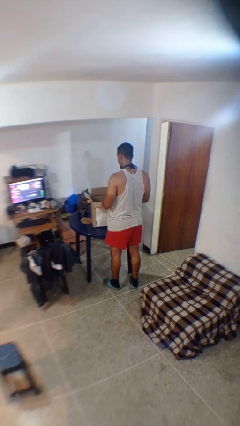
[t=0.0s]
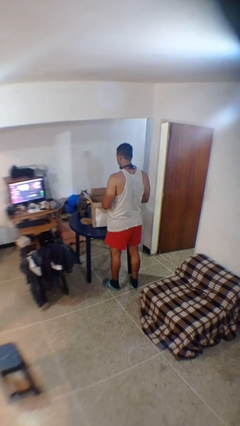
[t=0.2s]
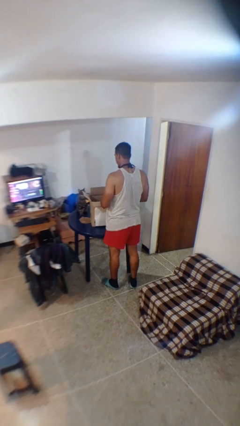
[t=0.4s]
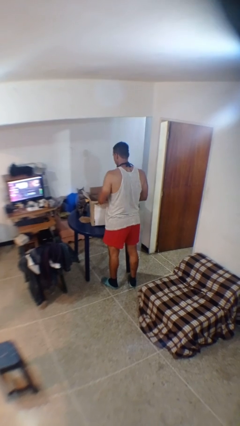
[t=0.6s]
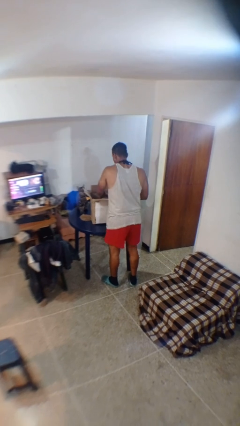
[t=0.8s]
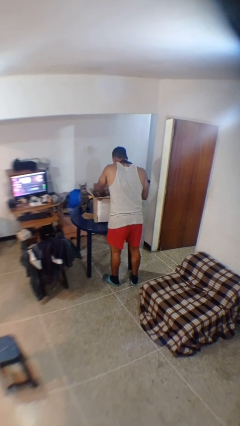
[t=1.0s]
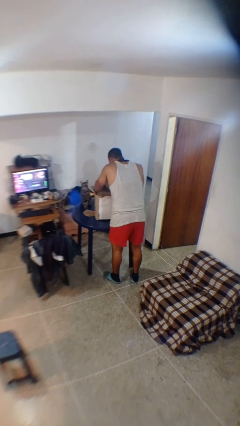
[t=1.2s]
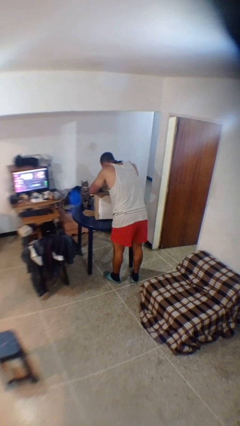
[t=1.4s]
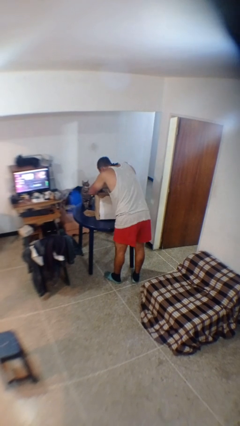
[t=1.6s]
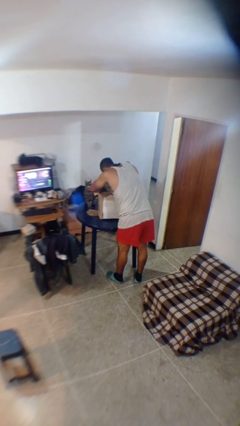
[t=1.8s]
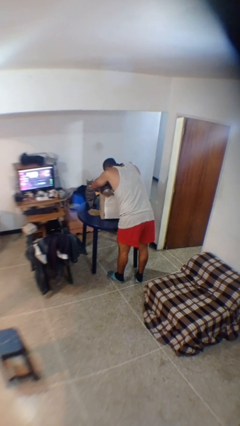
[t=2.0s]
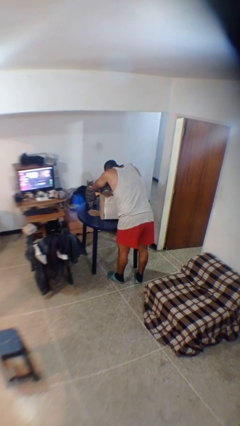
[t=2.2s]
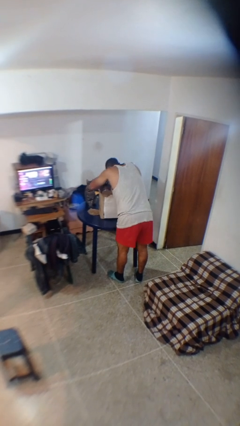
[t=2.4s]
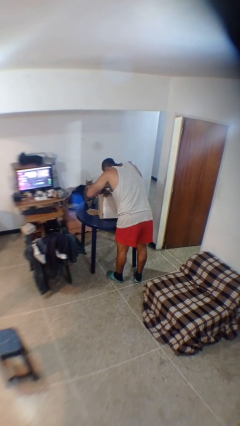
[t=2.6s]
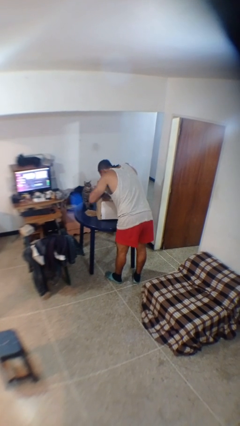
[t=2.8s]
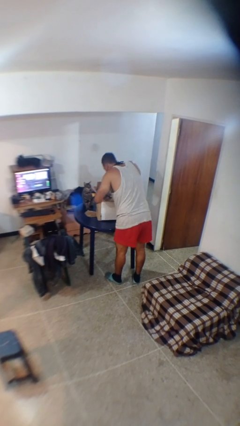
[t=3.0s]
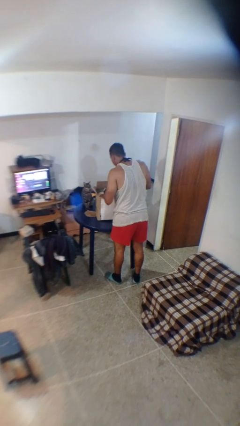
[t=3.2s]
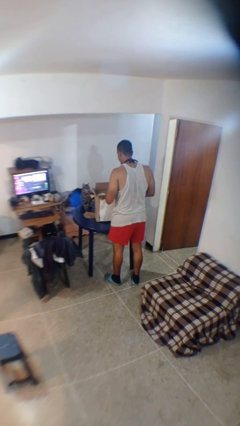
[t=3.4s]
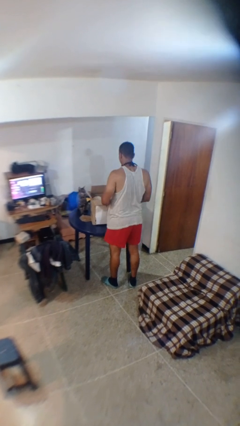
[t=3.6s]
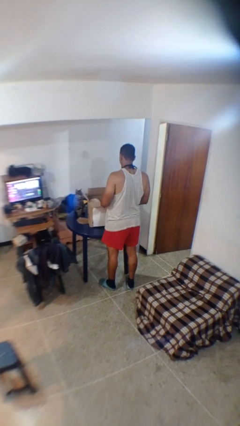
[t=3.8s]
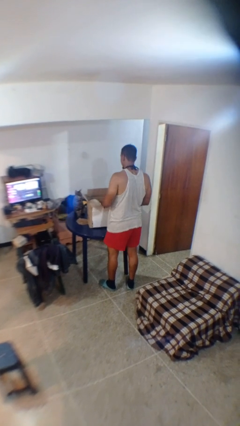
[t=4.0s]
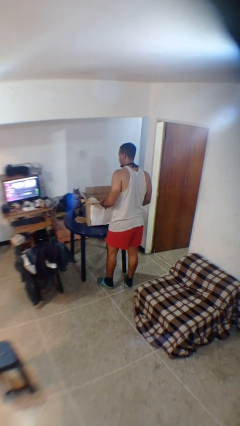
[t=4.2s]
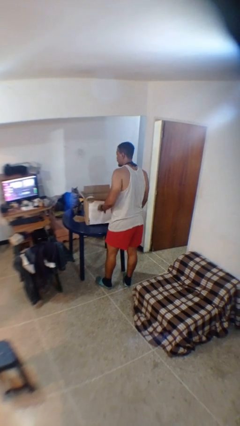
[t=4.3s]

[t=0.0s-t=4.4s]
person searches in box

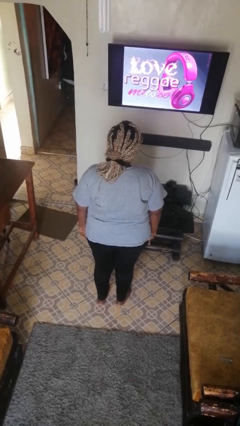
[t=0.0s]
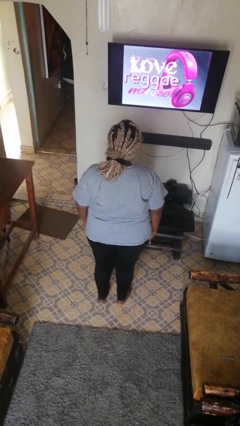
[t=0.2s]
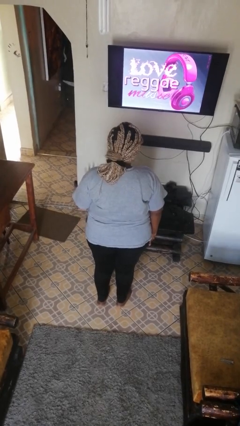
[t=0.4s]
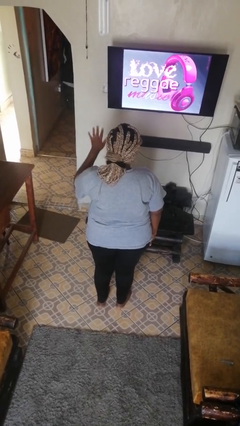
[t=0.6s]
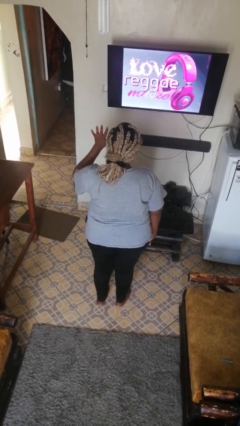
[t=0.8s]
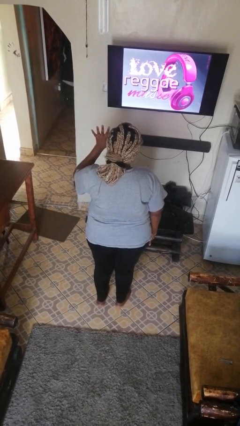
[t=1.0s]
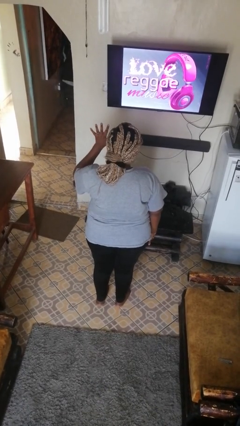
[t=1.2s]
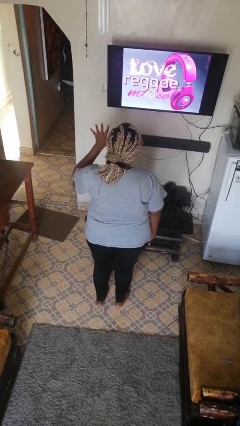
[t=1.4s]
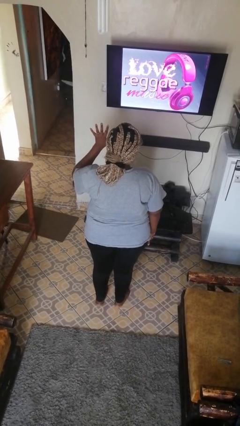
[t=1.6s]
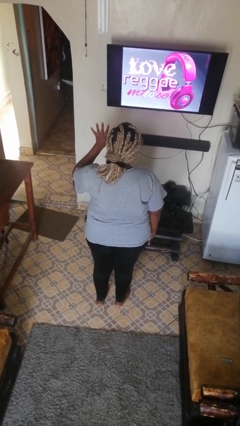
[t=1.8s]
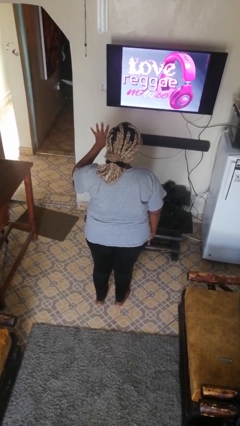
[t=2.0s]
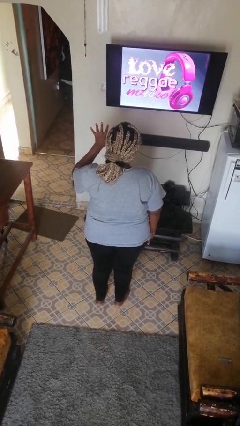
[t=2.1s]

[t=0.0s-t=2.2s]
person gestures stop

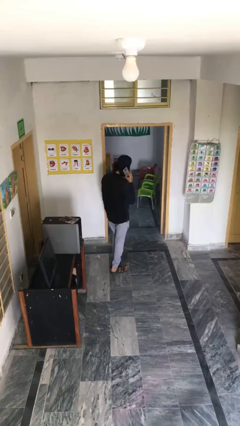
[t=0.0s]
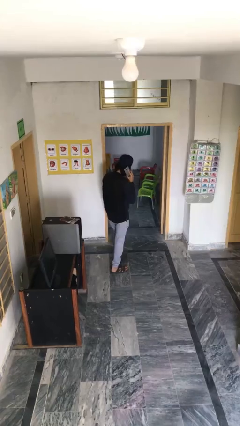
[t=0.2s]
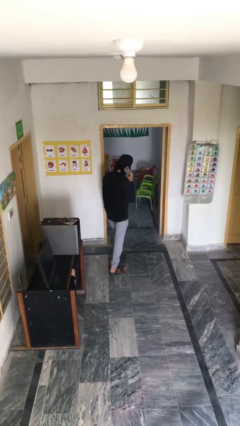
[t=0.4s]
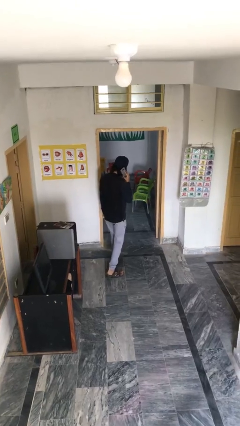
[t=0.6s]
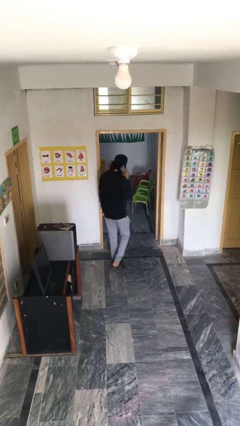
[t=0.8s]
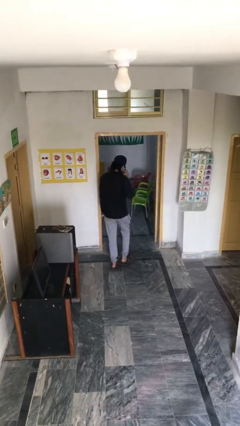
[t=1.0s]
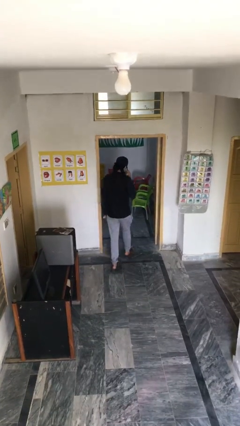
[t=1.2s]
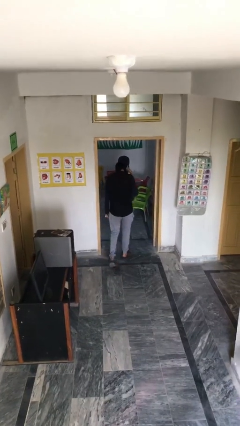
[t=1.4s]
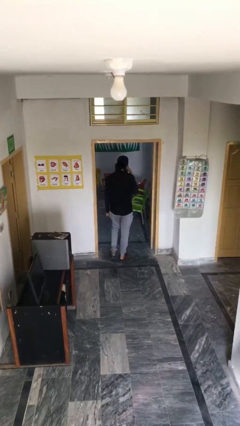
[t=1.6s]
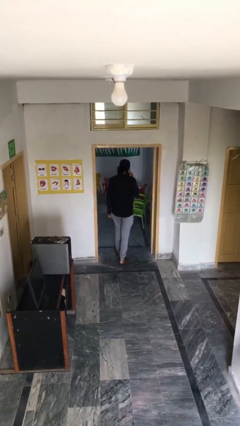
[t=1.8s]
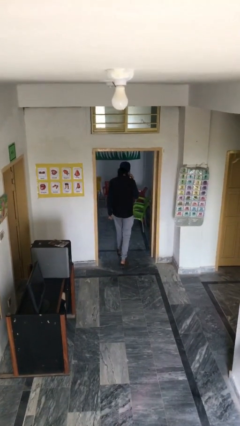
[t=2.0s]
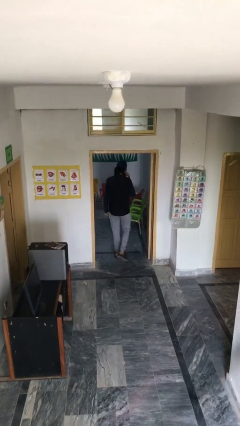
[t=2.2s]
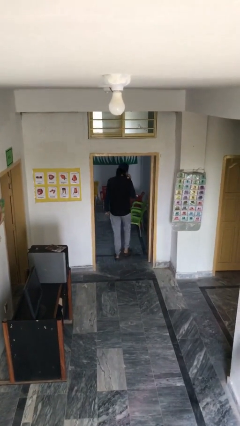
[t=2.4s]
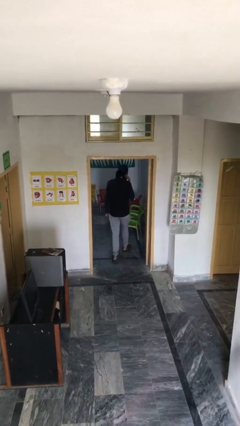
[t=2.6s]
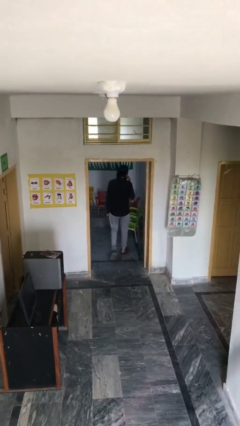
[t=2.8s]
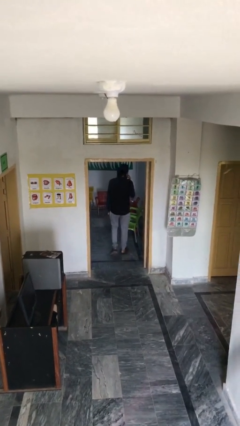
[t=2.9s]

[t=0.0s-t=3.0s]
person exits scene through structure

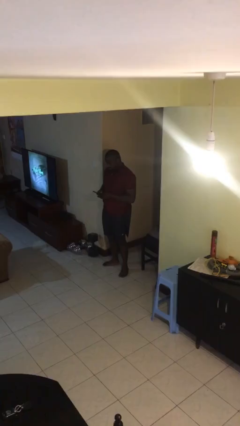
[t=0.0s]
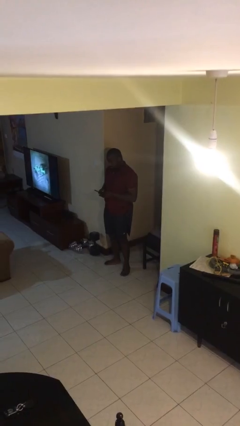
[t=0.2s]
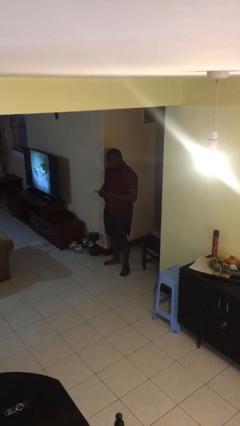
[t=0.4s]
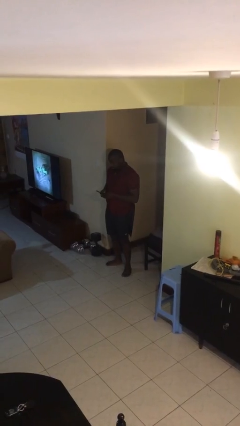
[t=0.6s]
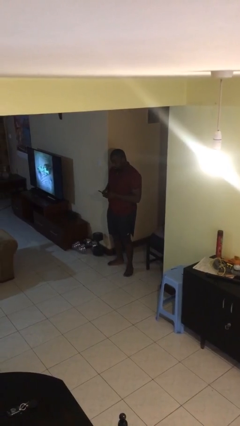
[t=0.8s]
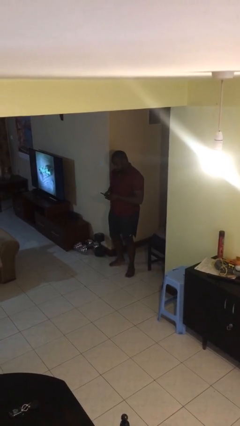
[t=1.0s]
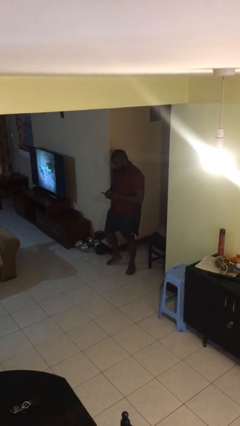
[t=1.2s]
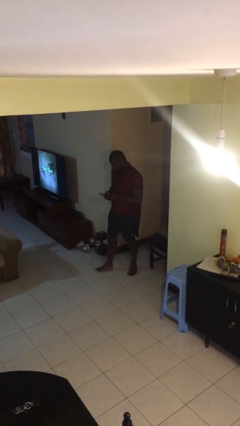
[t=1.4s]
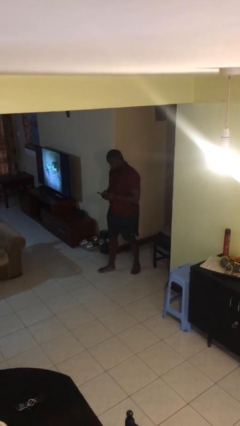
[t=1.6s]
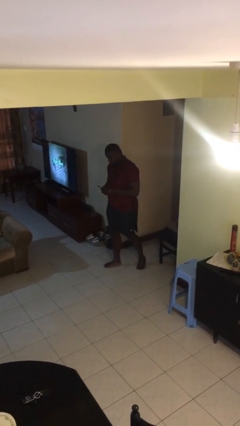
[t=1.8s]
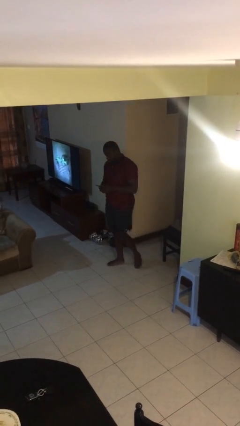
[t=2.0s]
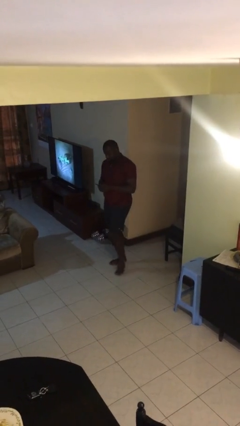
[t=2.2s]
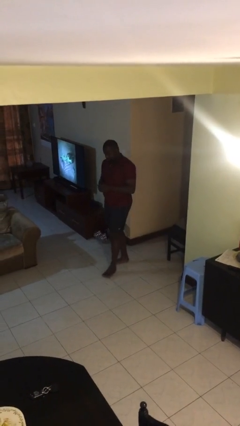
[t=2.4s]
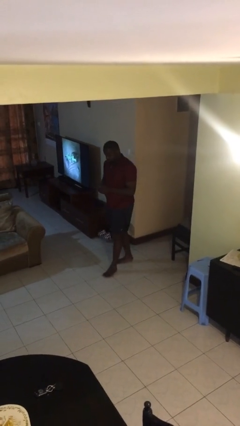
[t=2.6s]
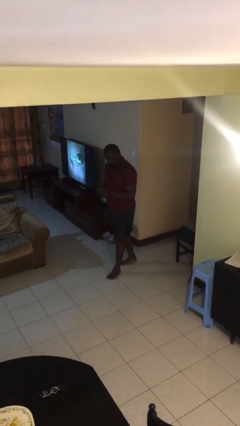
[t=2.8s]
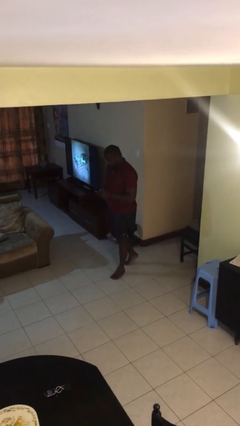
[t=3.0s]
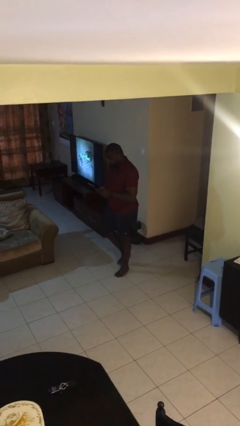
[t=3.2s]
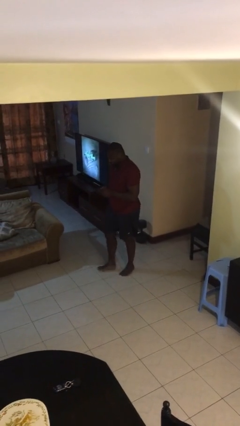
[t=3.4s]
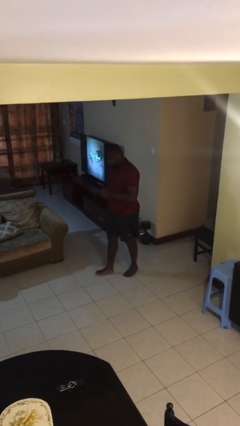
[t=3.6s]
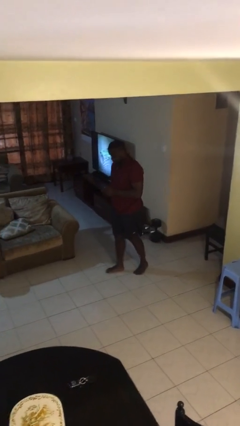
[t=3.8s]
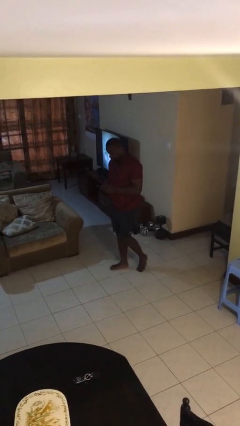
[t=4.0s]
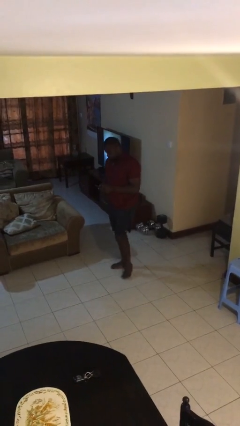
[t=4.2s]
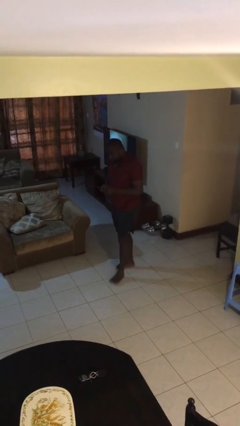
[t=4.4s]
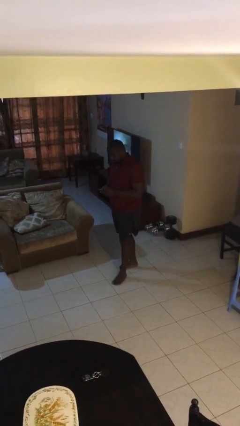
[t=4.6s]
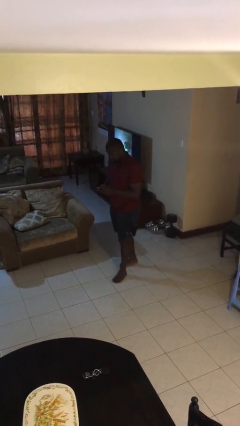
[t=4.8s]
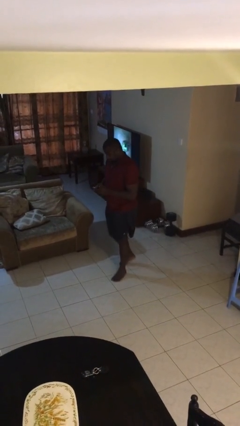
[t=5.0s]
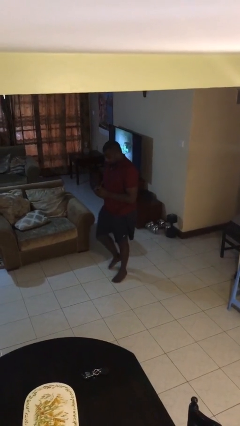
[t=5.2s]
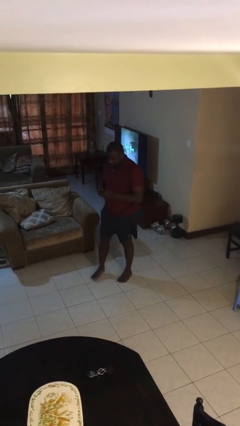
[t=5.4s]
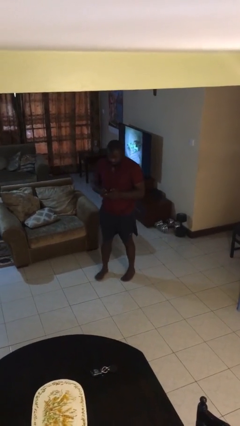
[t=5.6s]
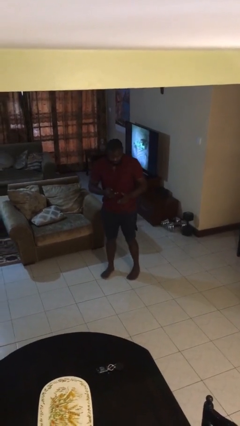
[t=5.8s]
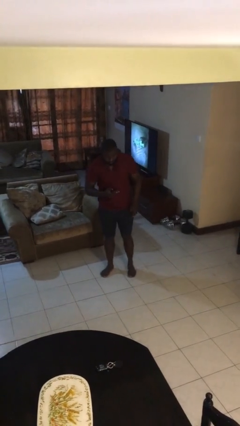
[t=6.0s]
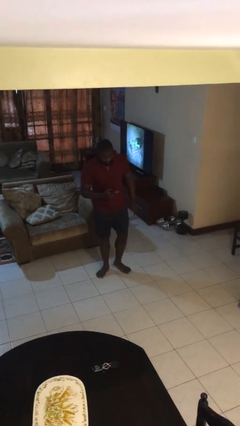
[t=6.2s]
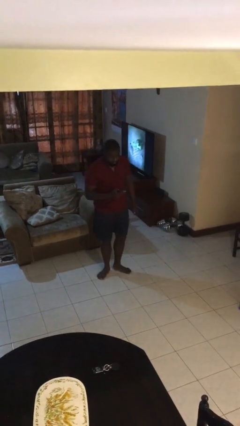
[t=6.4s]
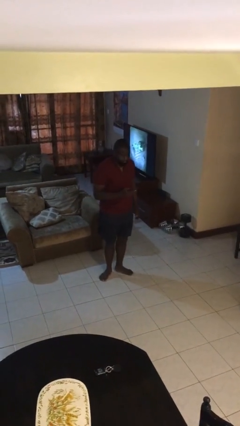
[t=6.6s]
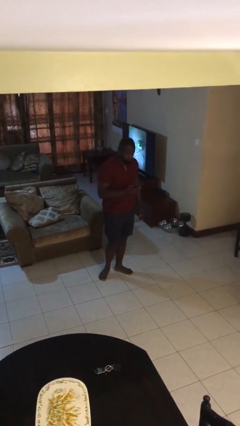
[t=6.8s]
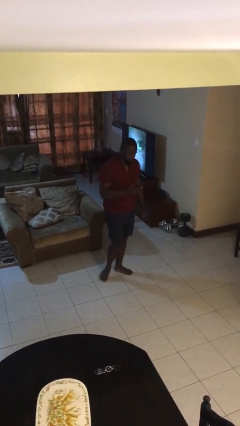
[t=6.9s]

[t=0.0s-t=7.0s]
person texts on phone

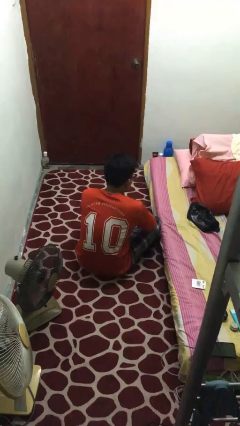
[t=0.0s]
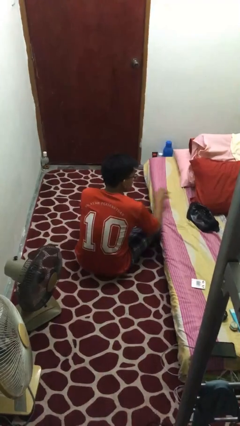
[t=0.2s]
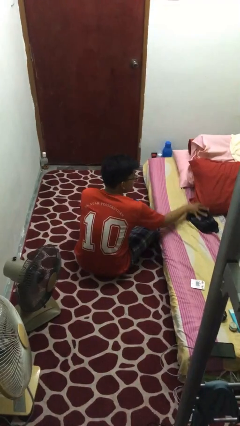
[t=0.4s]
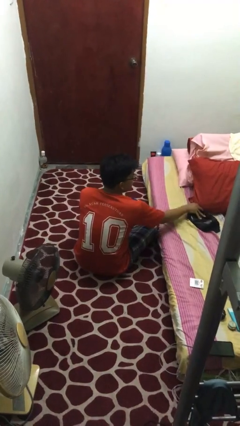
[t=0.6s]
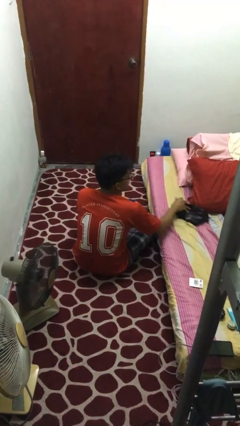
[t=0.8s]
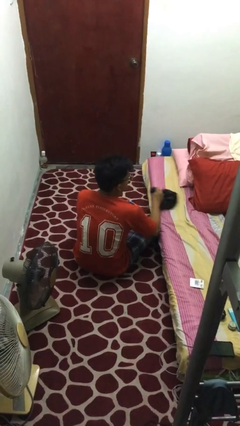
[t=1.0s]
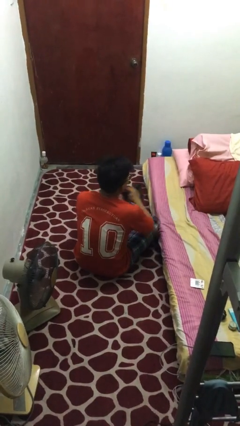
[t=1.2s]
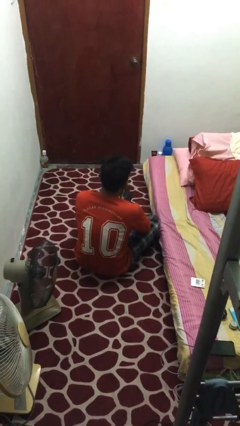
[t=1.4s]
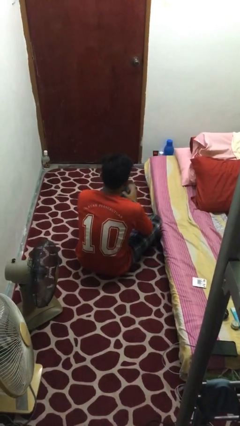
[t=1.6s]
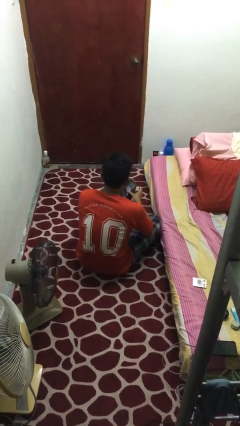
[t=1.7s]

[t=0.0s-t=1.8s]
person picks up object from bed
